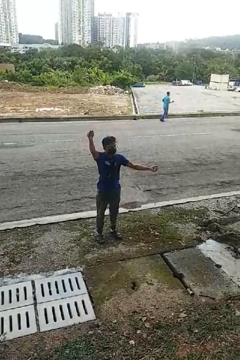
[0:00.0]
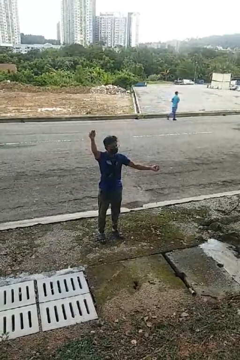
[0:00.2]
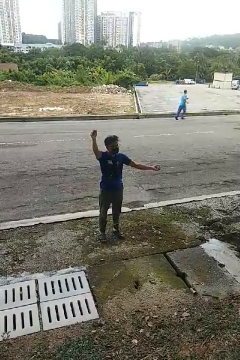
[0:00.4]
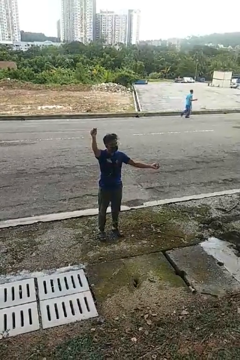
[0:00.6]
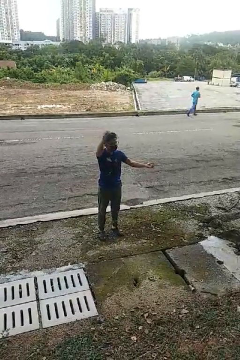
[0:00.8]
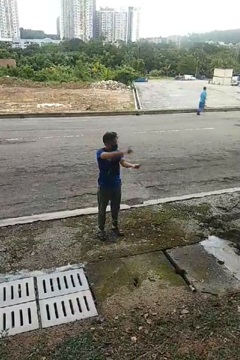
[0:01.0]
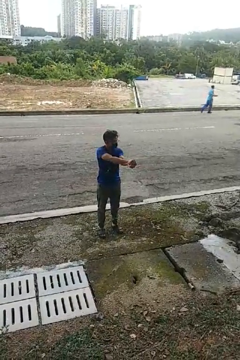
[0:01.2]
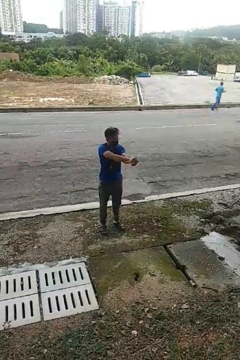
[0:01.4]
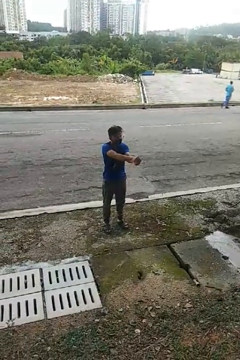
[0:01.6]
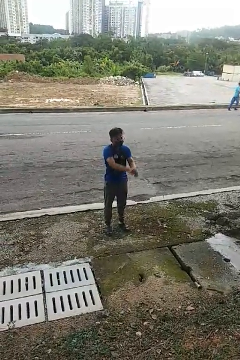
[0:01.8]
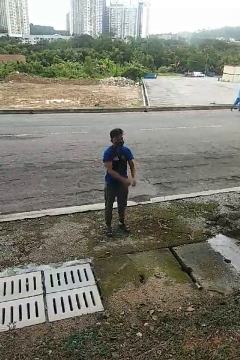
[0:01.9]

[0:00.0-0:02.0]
person gestures zoom out

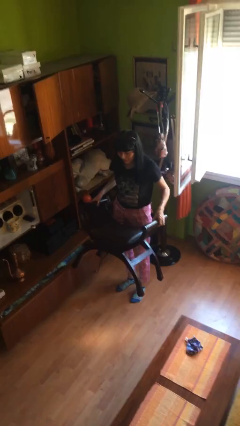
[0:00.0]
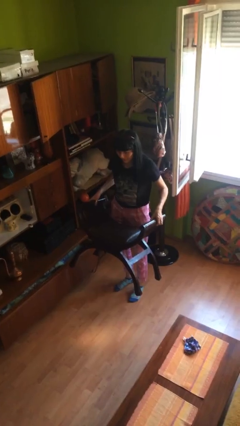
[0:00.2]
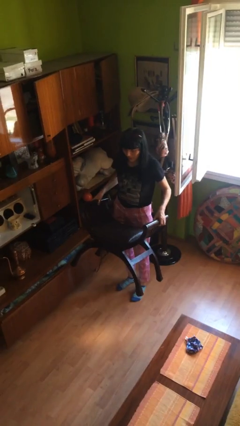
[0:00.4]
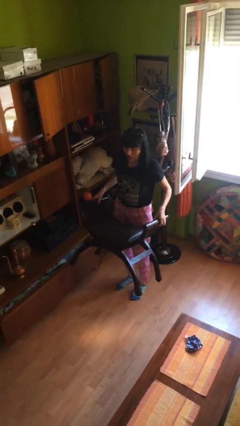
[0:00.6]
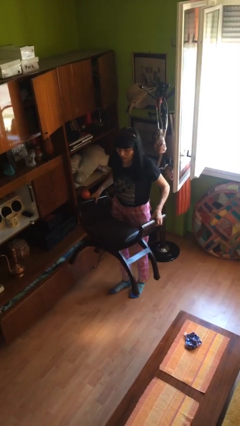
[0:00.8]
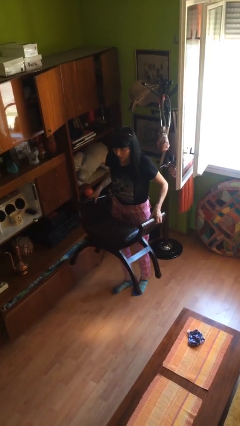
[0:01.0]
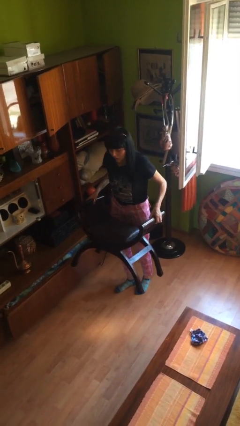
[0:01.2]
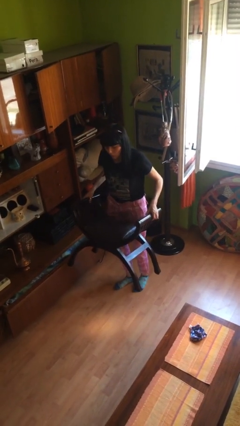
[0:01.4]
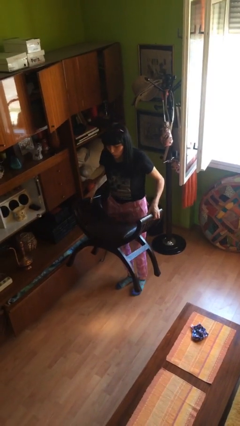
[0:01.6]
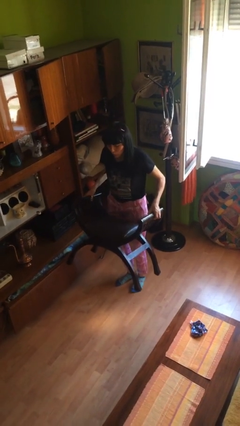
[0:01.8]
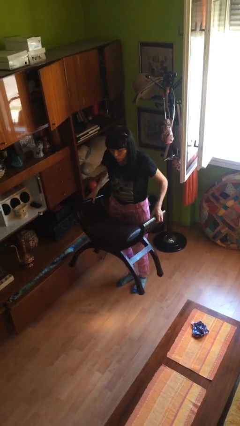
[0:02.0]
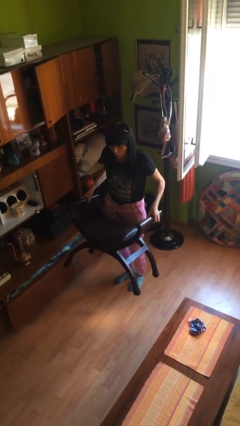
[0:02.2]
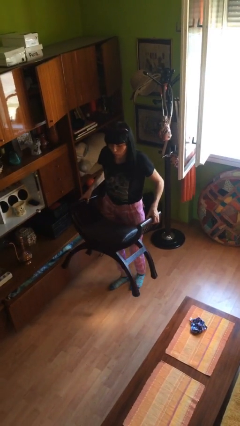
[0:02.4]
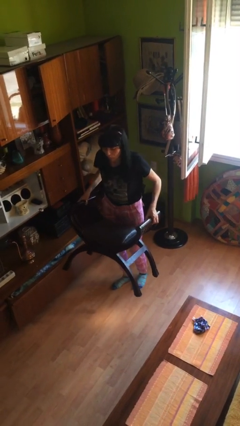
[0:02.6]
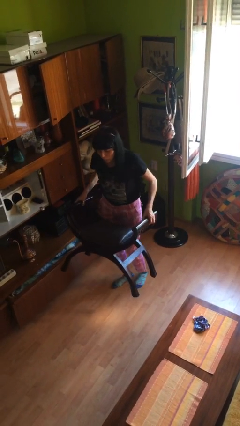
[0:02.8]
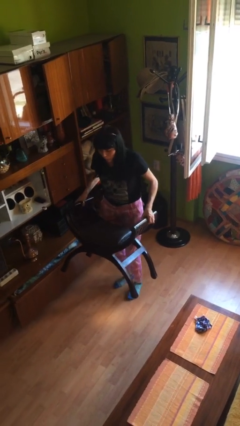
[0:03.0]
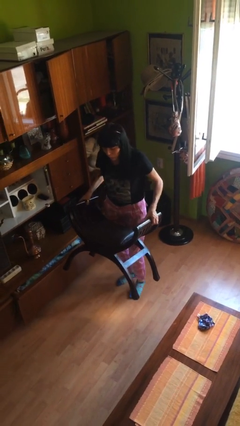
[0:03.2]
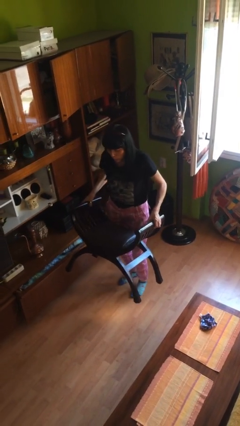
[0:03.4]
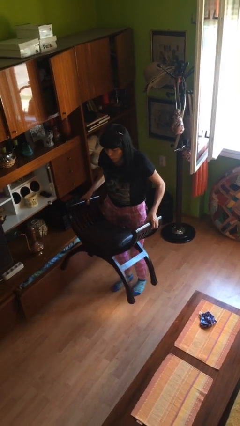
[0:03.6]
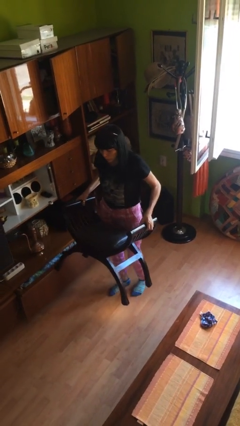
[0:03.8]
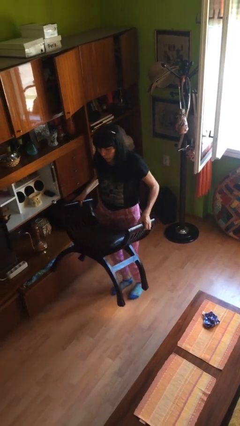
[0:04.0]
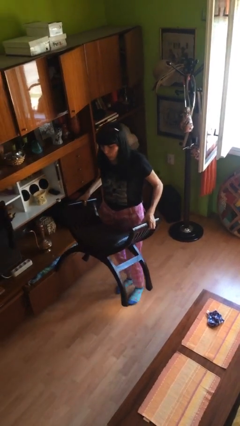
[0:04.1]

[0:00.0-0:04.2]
person carries heavy object

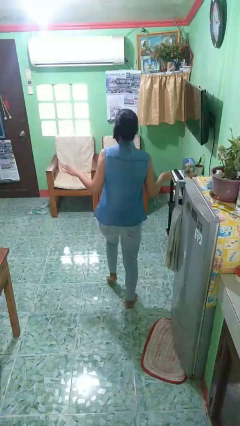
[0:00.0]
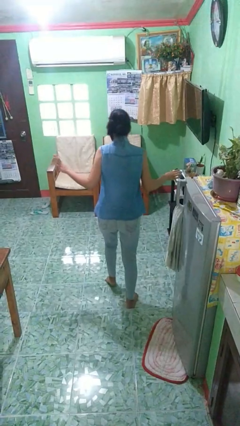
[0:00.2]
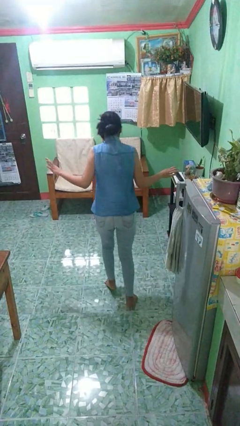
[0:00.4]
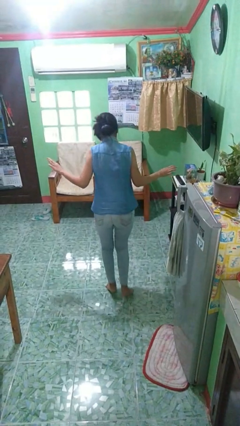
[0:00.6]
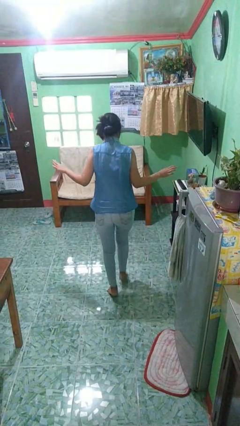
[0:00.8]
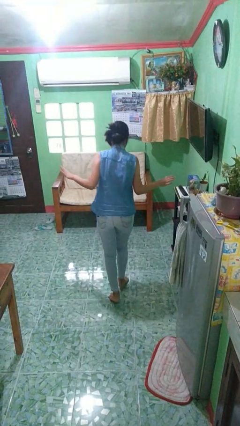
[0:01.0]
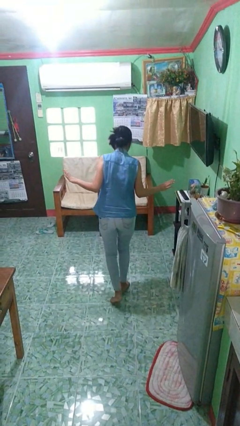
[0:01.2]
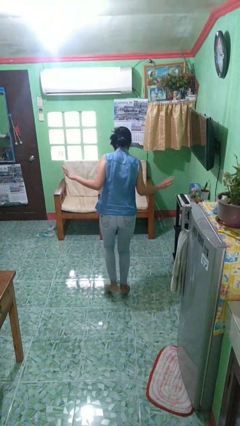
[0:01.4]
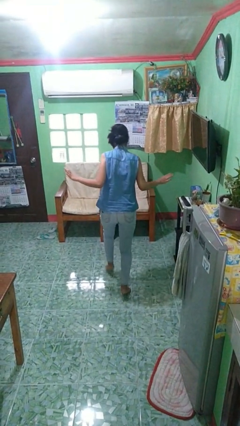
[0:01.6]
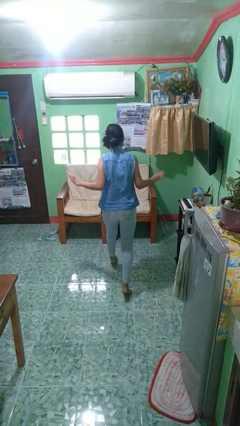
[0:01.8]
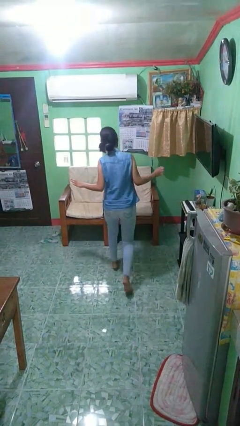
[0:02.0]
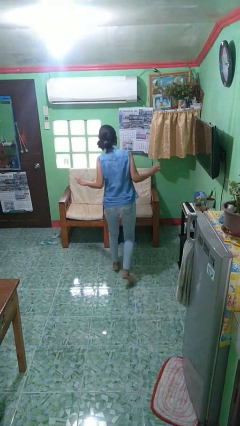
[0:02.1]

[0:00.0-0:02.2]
person walks tiptoe

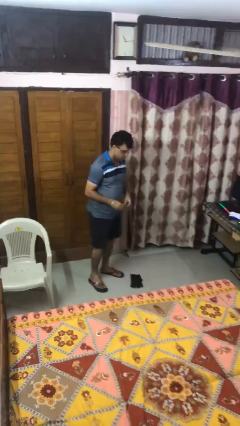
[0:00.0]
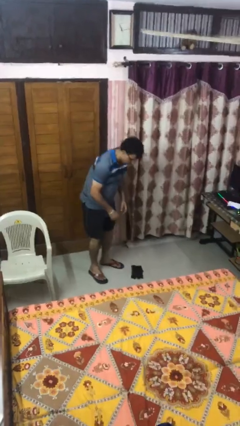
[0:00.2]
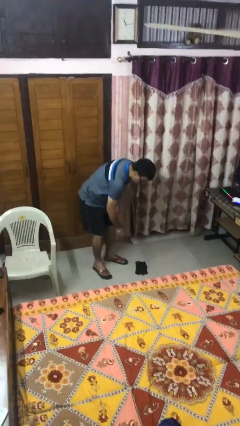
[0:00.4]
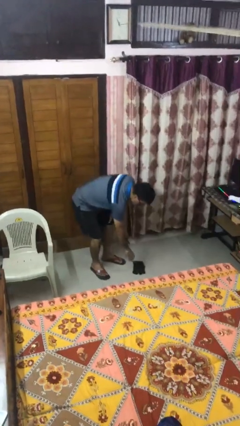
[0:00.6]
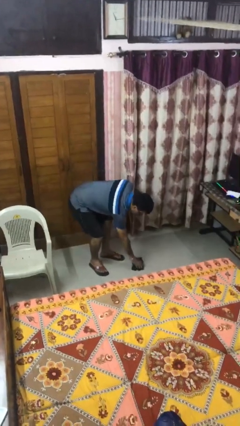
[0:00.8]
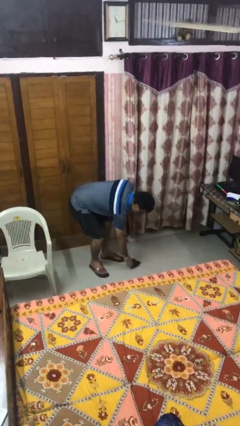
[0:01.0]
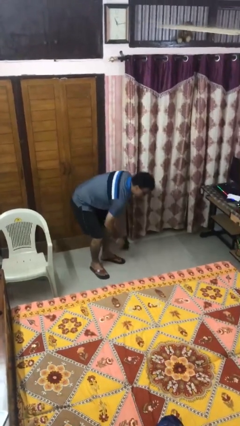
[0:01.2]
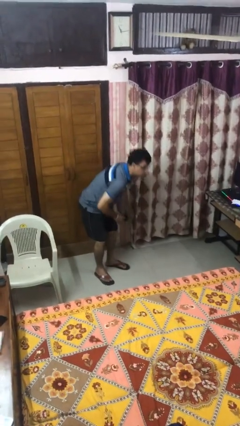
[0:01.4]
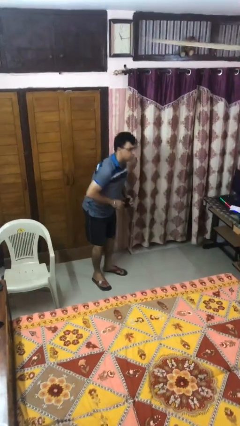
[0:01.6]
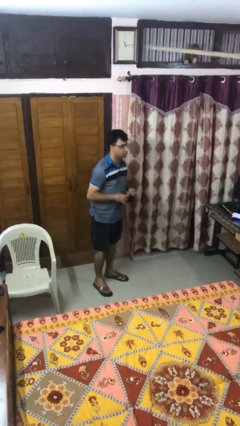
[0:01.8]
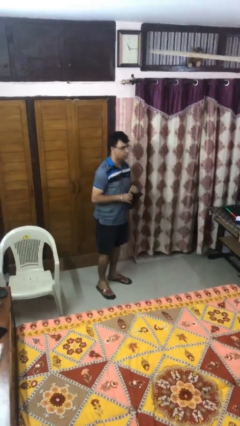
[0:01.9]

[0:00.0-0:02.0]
person picks up object from floor

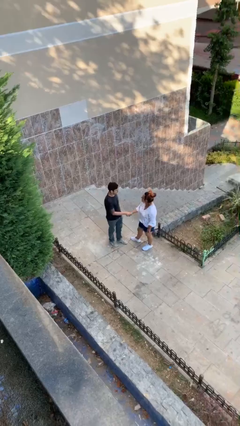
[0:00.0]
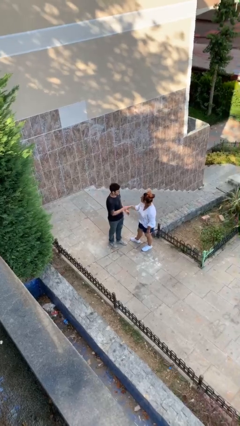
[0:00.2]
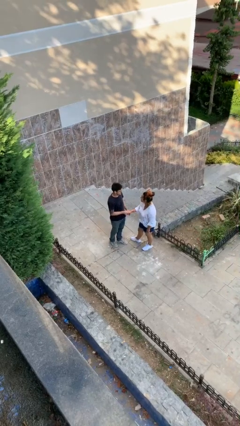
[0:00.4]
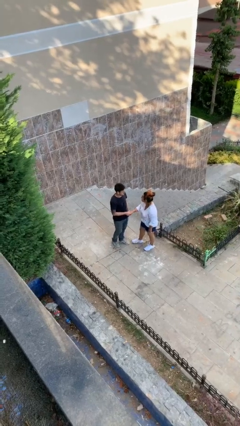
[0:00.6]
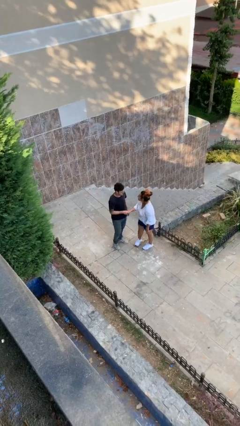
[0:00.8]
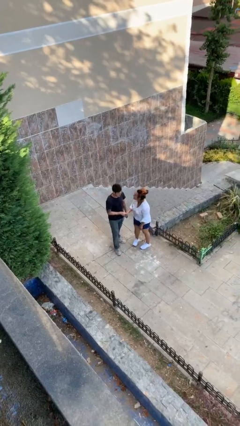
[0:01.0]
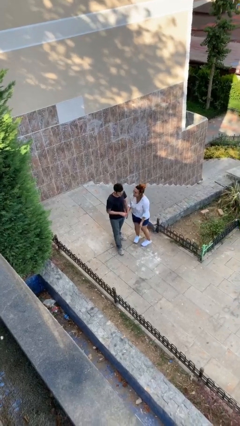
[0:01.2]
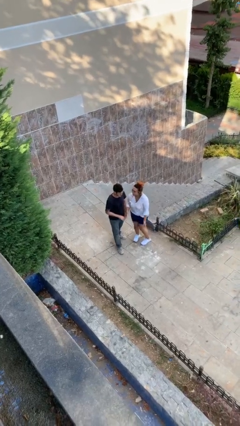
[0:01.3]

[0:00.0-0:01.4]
person shakes hand

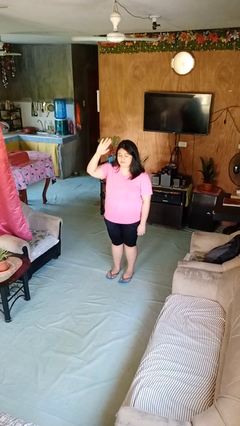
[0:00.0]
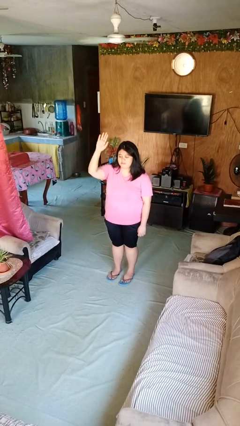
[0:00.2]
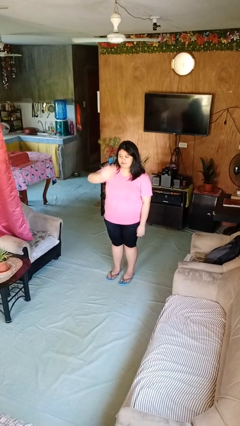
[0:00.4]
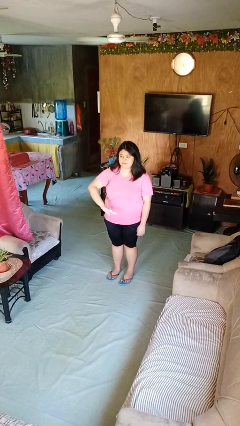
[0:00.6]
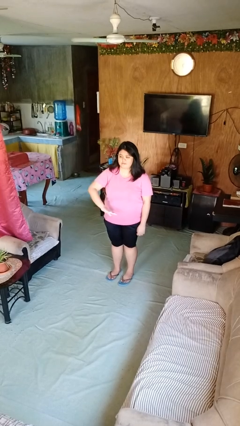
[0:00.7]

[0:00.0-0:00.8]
person gestures swipe down

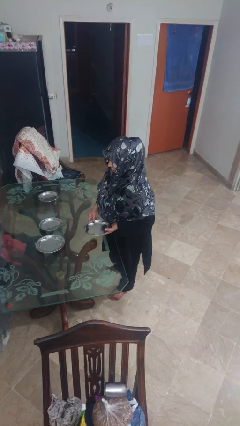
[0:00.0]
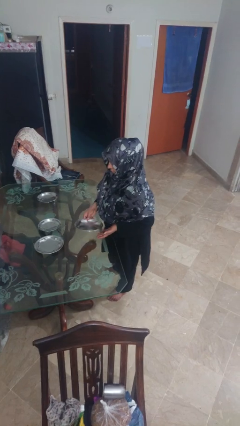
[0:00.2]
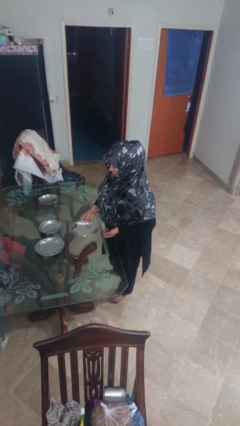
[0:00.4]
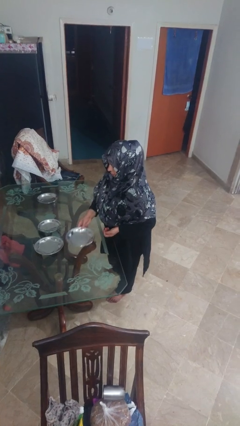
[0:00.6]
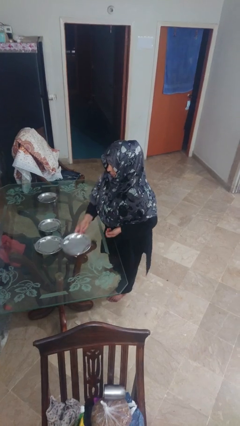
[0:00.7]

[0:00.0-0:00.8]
person sets table

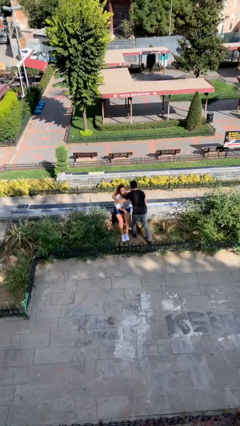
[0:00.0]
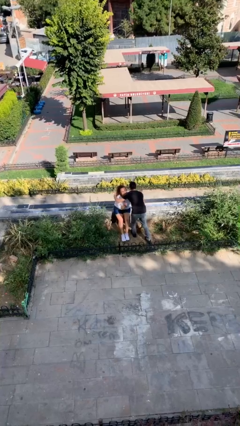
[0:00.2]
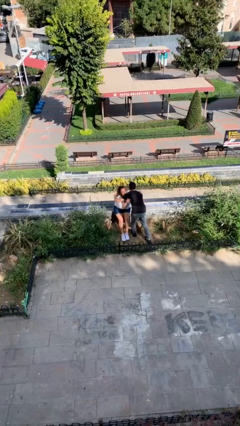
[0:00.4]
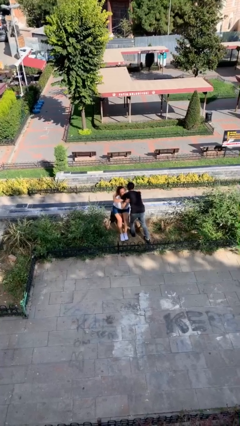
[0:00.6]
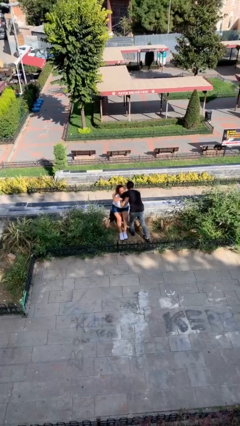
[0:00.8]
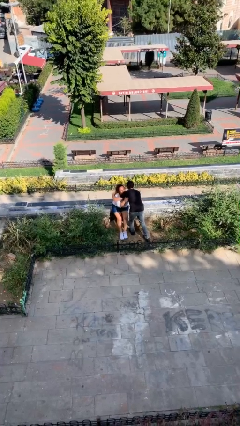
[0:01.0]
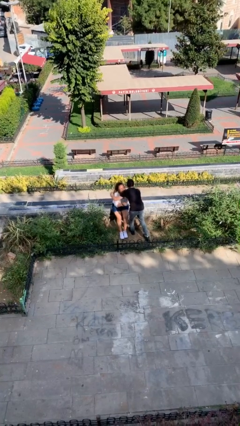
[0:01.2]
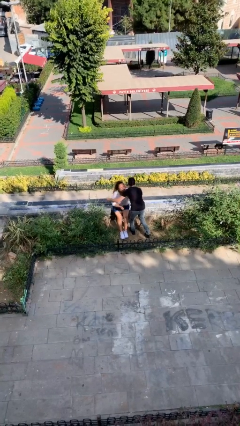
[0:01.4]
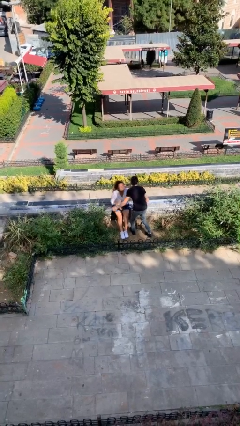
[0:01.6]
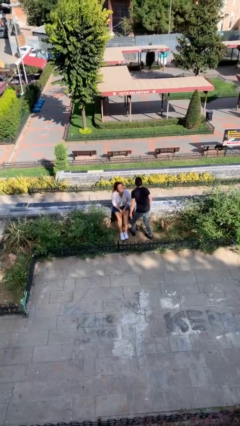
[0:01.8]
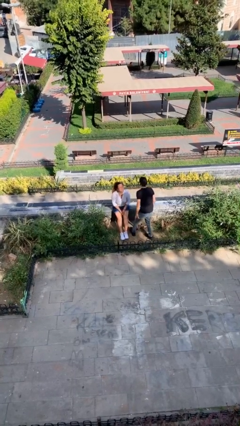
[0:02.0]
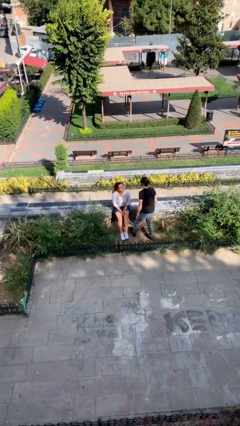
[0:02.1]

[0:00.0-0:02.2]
person embraces person

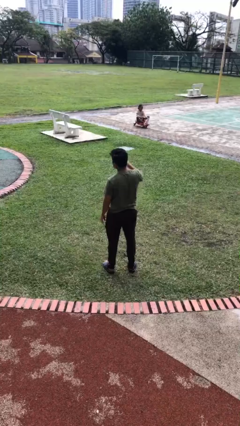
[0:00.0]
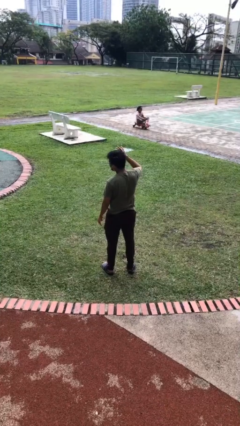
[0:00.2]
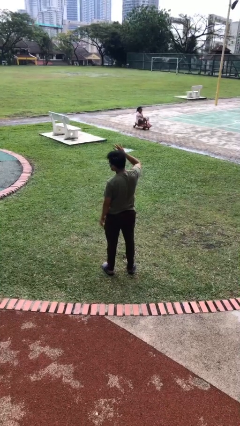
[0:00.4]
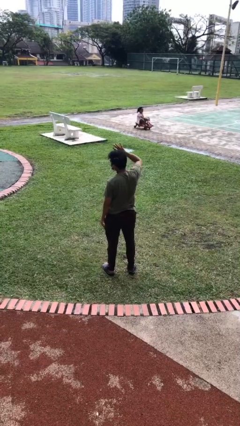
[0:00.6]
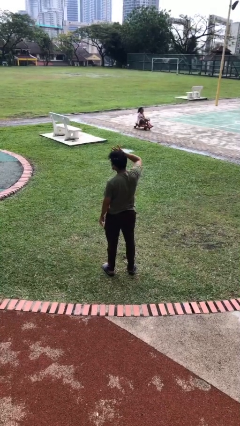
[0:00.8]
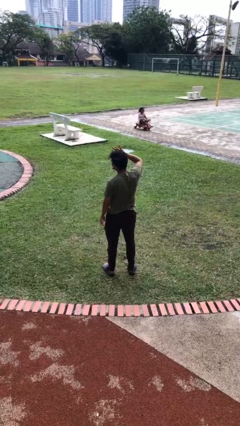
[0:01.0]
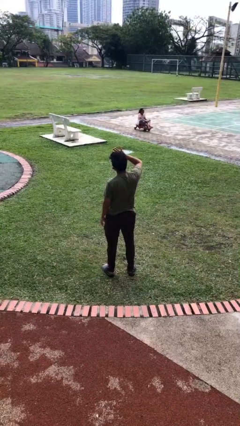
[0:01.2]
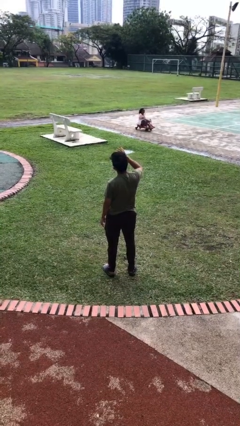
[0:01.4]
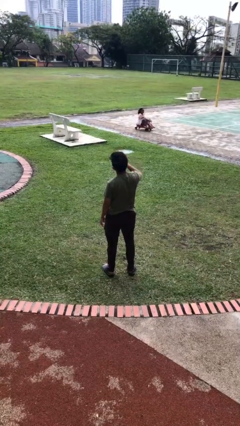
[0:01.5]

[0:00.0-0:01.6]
person shades eyes
